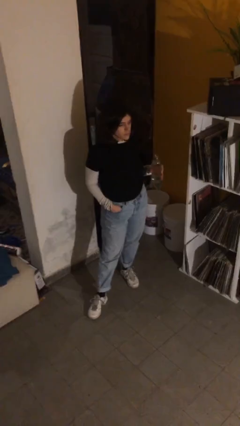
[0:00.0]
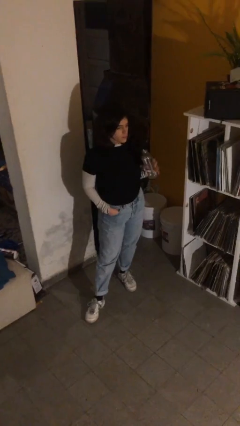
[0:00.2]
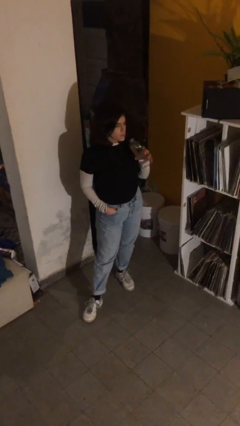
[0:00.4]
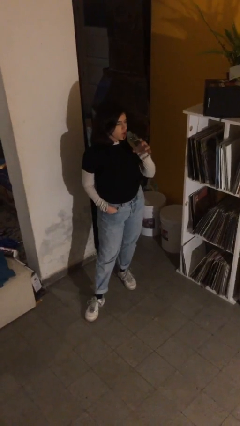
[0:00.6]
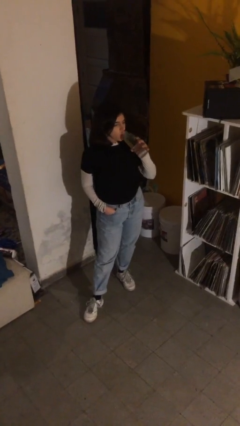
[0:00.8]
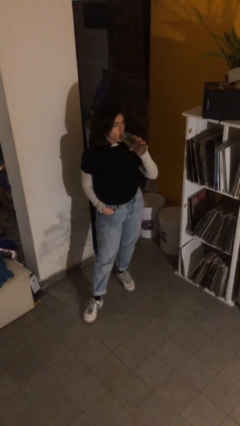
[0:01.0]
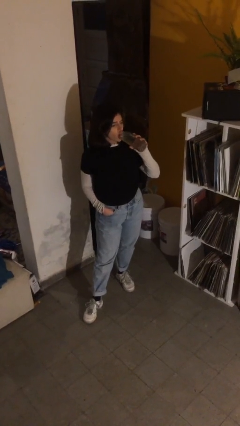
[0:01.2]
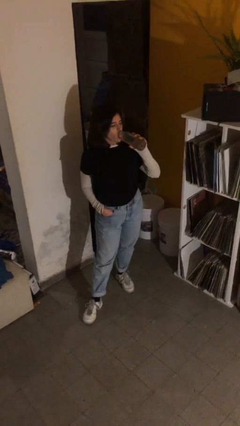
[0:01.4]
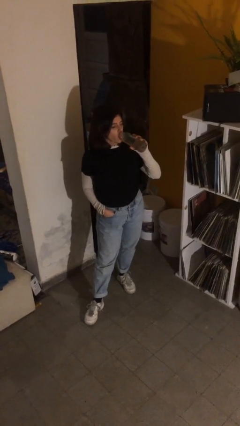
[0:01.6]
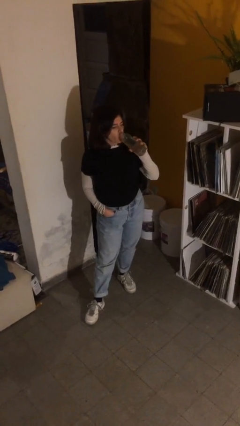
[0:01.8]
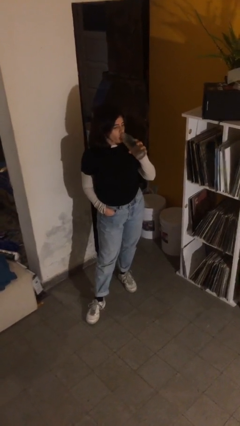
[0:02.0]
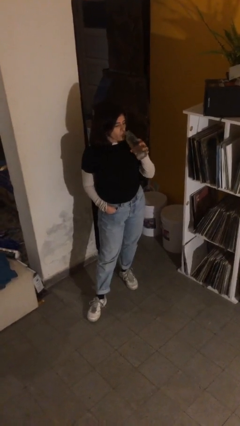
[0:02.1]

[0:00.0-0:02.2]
person drinks from bottle

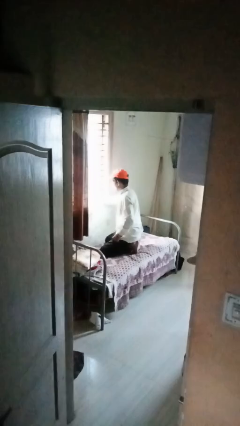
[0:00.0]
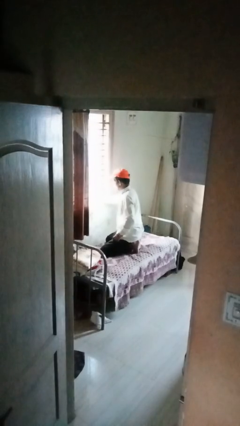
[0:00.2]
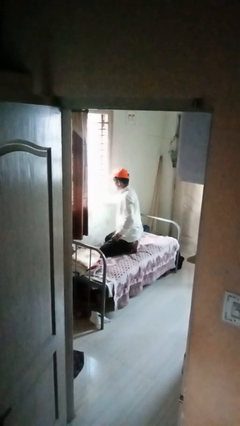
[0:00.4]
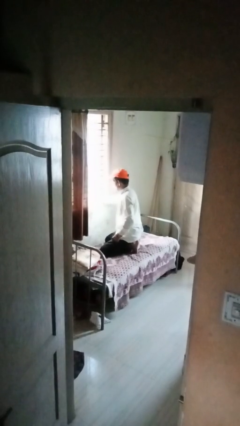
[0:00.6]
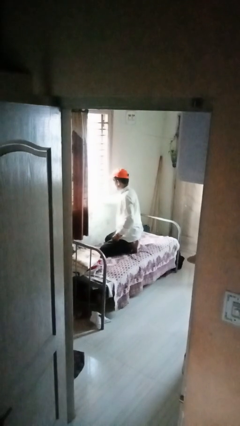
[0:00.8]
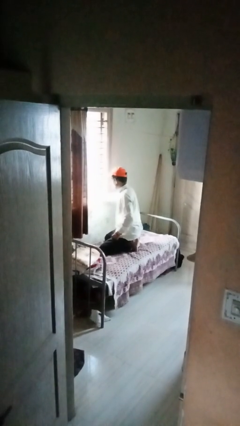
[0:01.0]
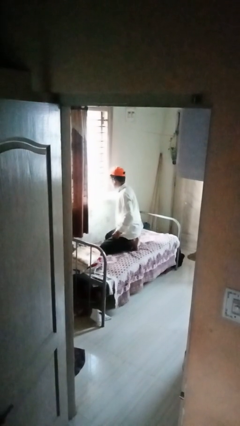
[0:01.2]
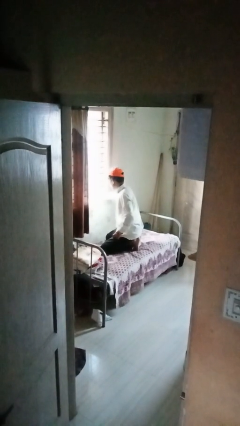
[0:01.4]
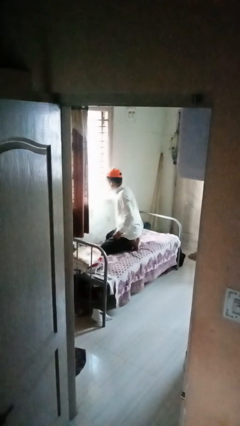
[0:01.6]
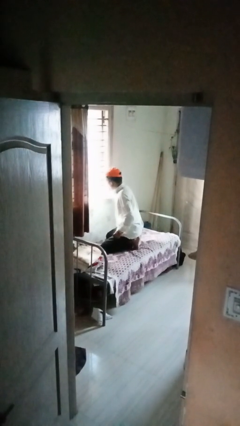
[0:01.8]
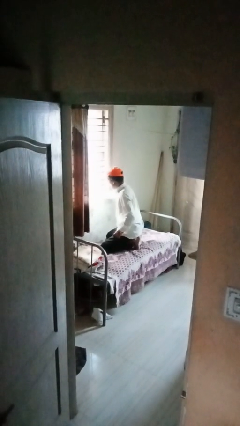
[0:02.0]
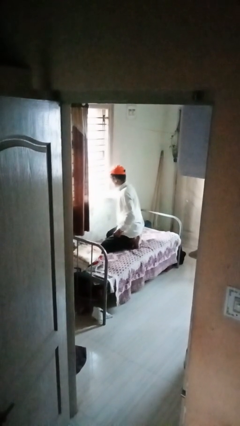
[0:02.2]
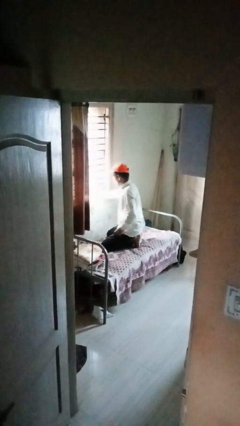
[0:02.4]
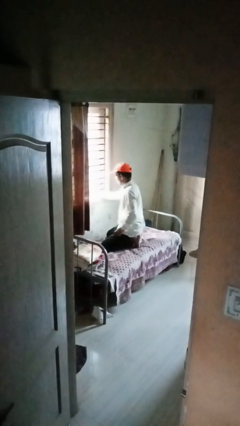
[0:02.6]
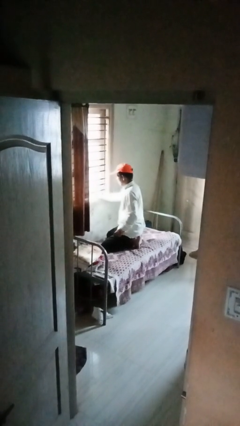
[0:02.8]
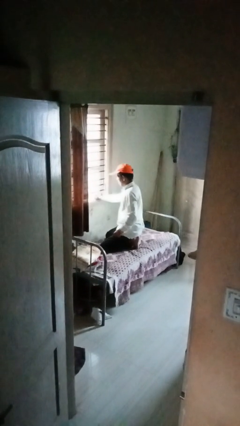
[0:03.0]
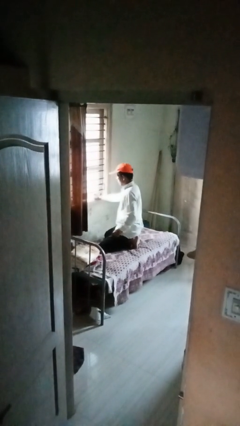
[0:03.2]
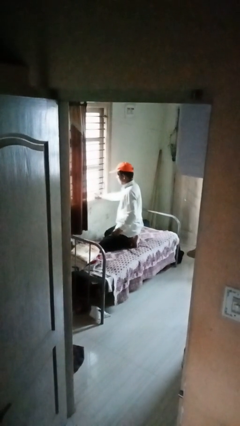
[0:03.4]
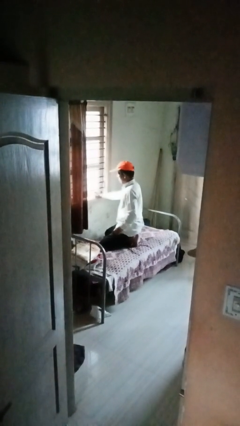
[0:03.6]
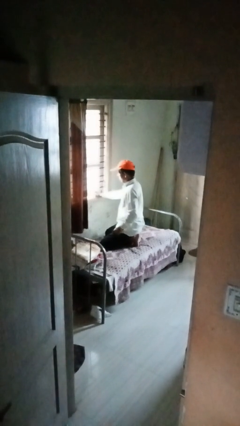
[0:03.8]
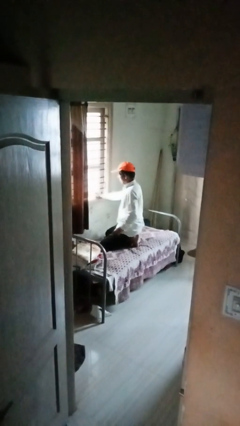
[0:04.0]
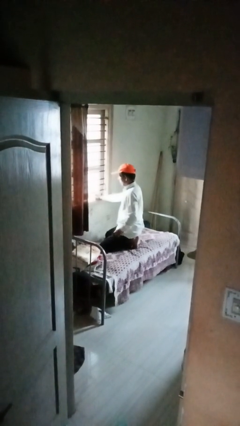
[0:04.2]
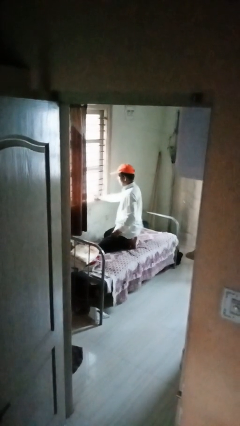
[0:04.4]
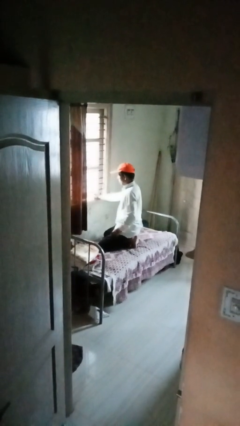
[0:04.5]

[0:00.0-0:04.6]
person closes home window

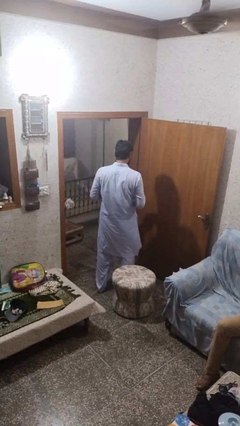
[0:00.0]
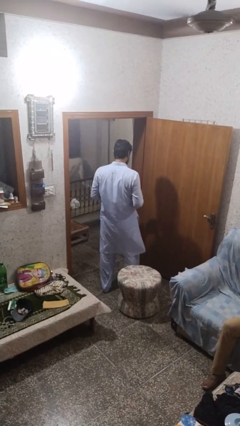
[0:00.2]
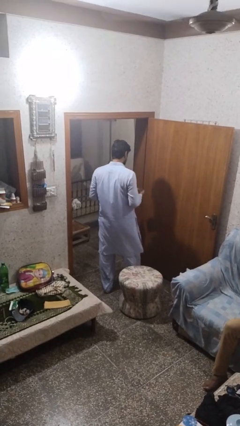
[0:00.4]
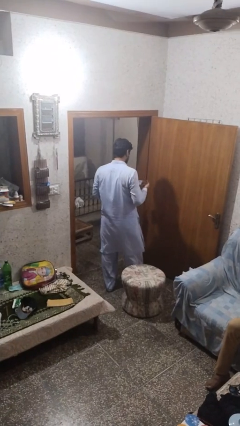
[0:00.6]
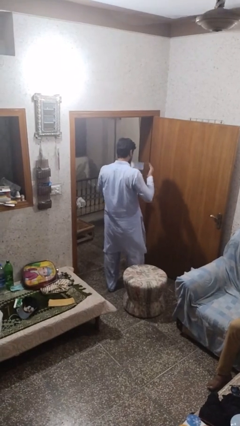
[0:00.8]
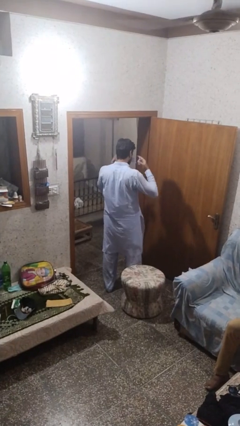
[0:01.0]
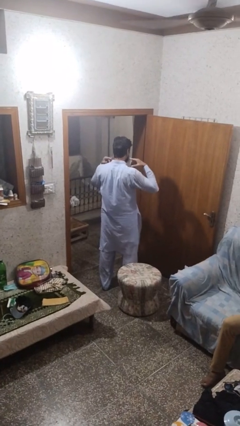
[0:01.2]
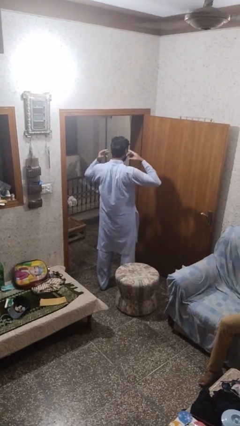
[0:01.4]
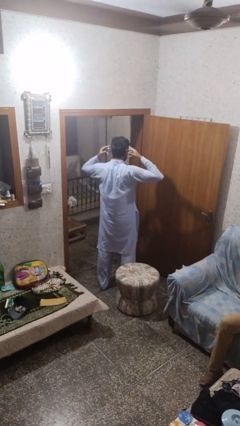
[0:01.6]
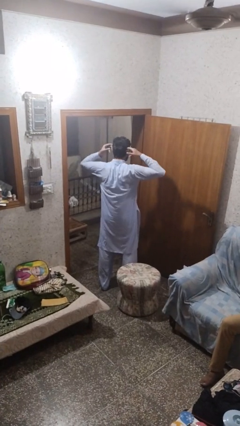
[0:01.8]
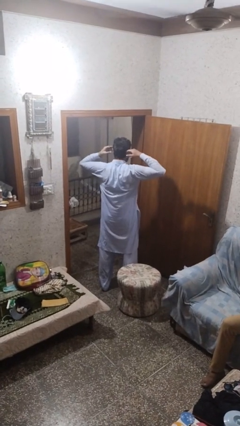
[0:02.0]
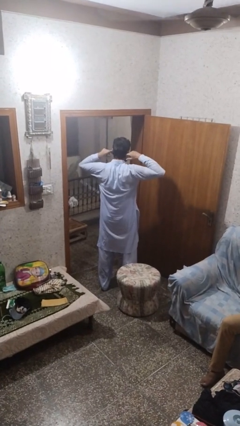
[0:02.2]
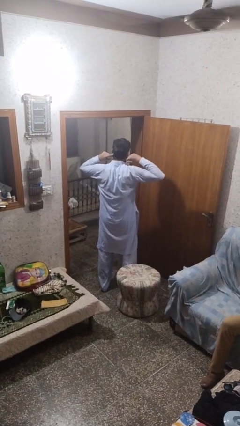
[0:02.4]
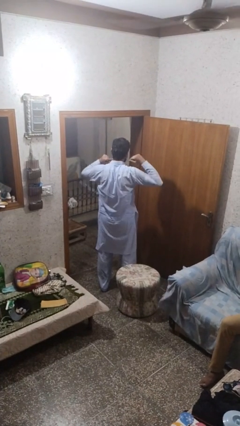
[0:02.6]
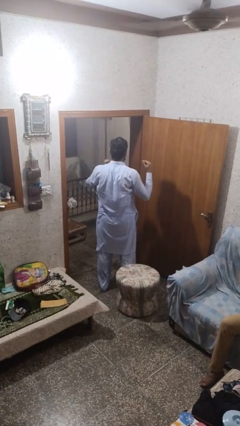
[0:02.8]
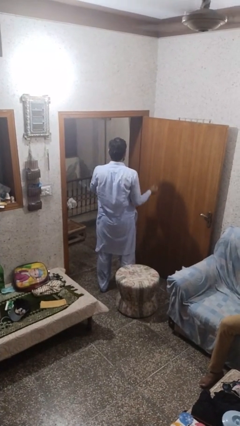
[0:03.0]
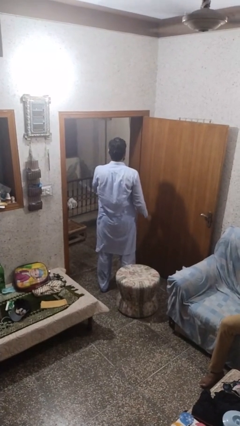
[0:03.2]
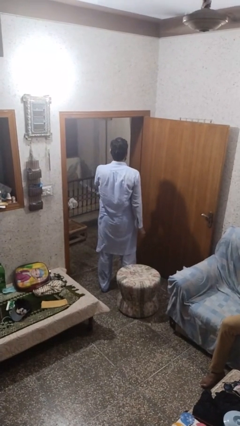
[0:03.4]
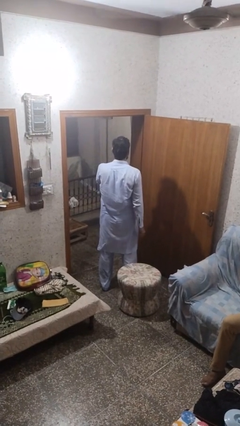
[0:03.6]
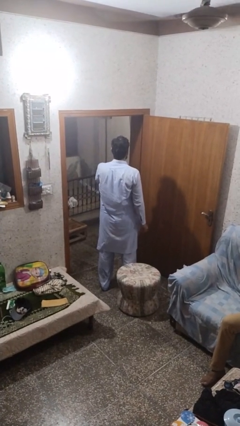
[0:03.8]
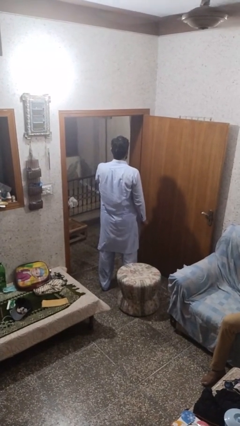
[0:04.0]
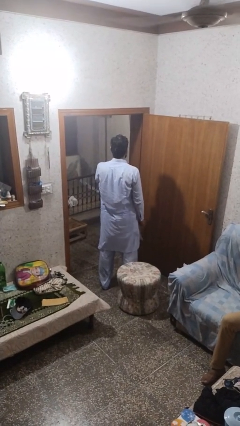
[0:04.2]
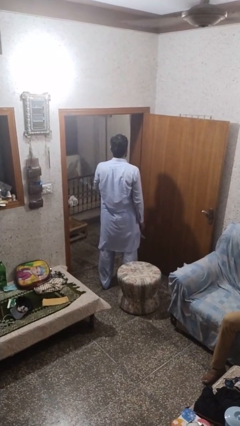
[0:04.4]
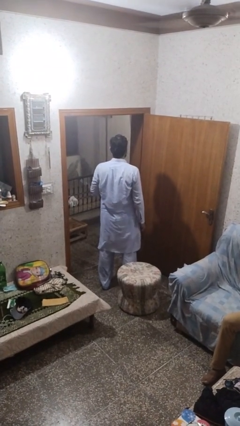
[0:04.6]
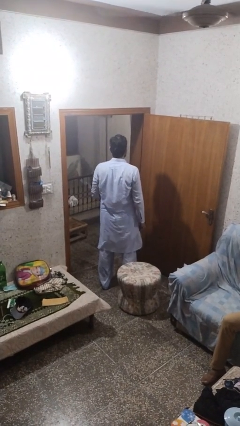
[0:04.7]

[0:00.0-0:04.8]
person puts on facemask

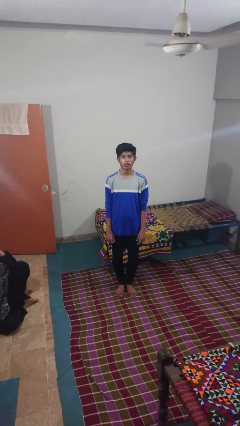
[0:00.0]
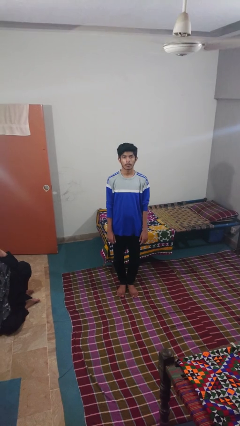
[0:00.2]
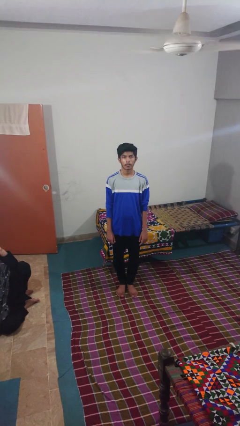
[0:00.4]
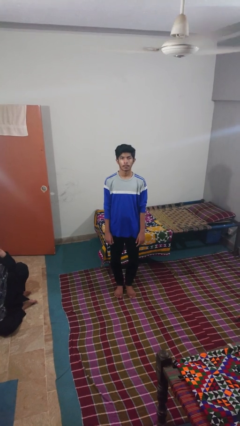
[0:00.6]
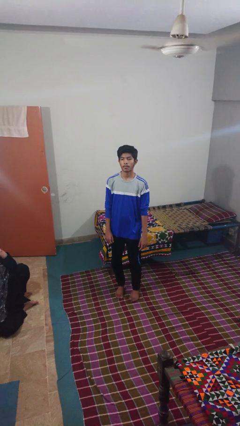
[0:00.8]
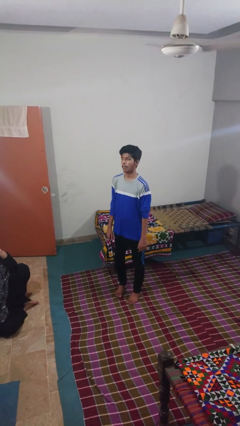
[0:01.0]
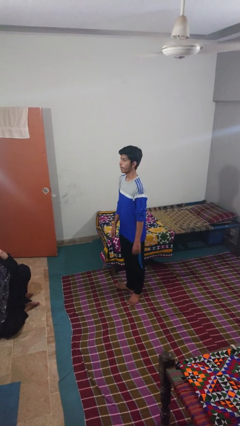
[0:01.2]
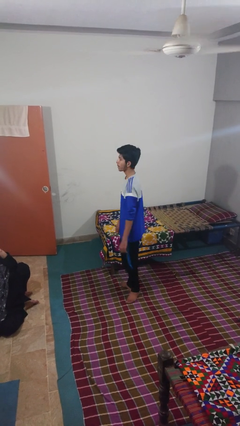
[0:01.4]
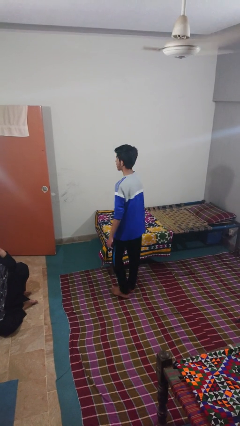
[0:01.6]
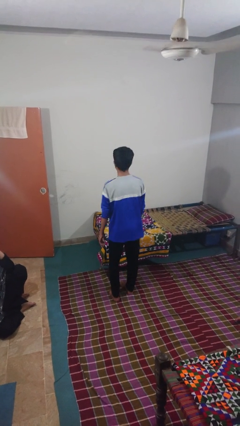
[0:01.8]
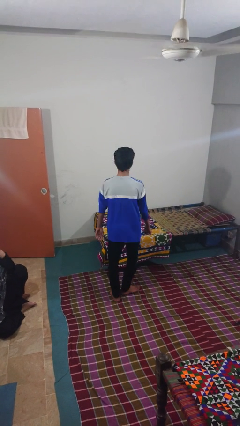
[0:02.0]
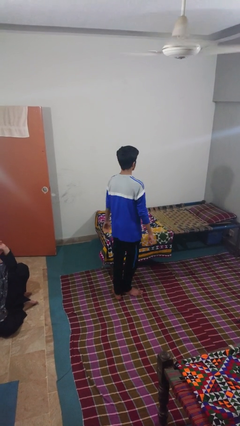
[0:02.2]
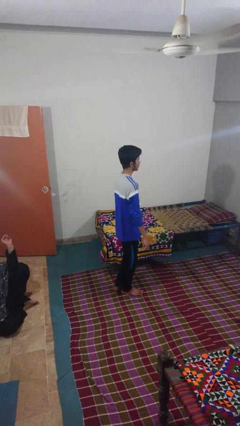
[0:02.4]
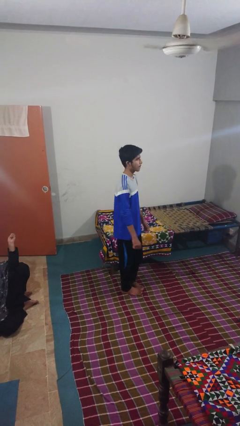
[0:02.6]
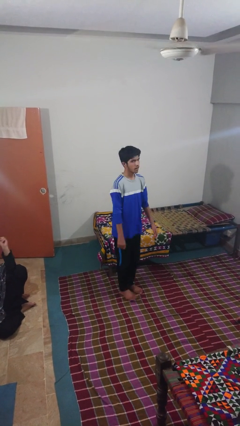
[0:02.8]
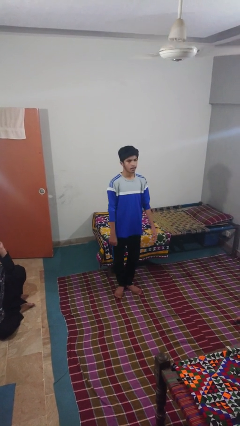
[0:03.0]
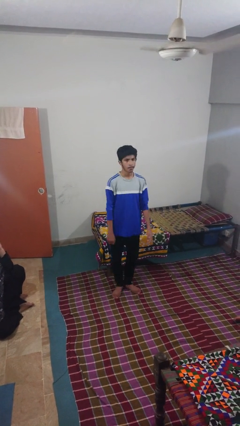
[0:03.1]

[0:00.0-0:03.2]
person twirls

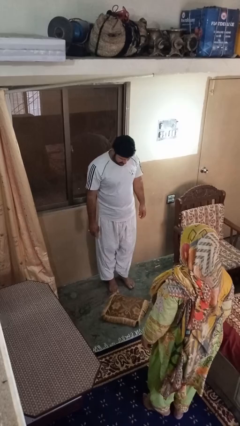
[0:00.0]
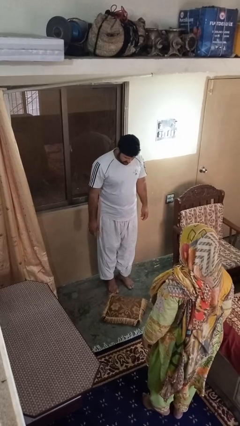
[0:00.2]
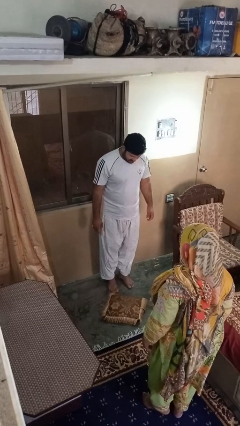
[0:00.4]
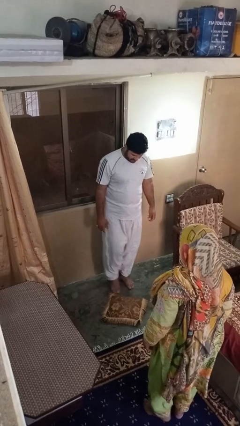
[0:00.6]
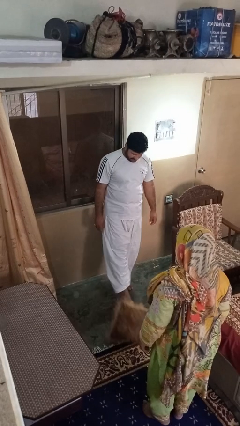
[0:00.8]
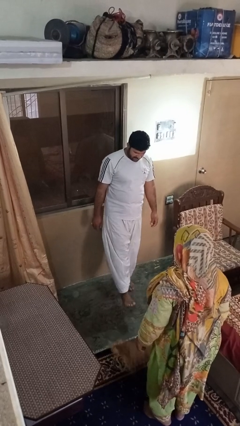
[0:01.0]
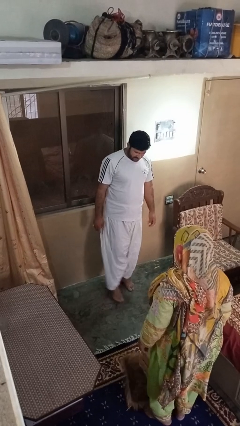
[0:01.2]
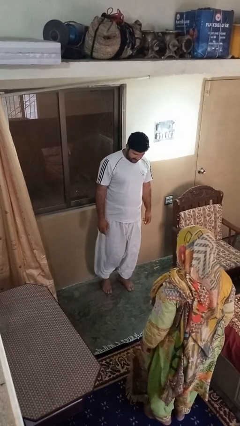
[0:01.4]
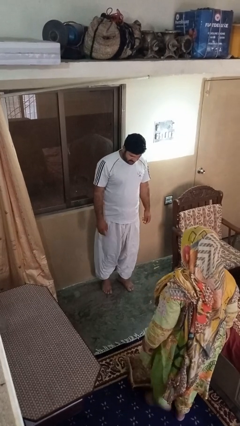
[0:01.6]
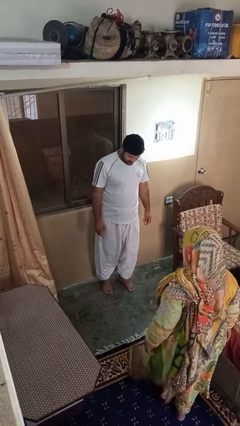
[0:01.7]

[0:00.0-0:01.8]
person kicks object to person

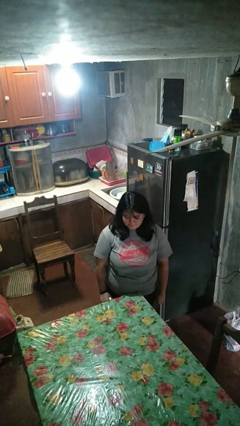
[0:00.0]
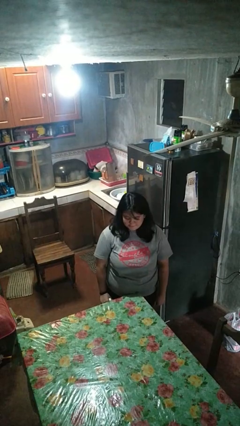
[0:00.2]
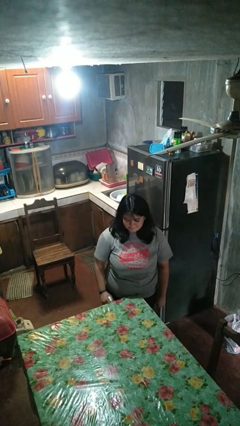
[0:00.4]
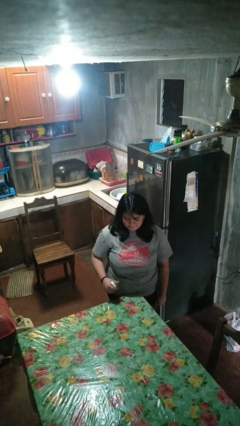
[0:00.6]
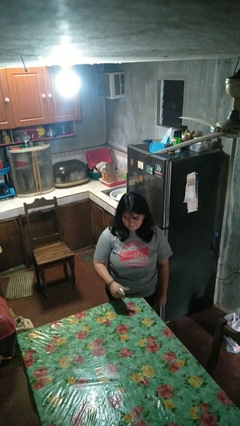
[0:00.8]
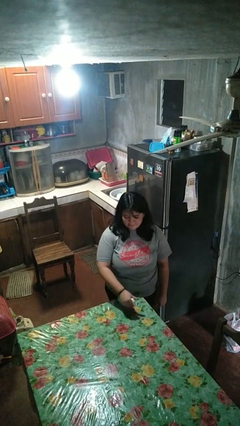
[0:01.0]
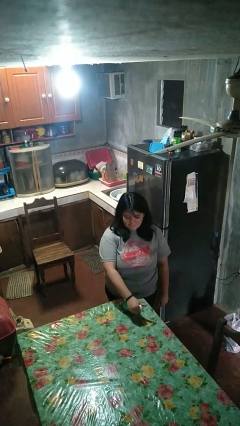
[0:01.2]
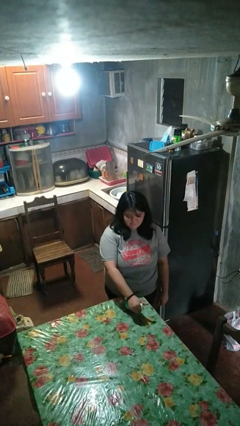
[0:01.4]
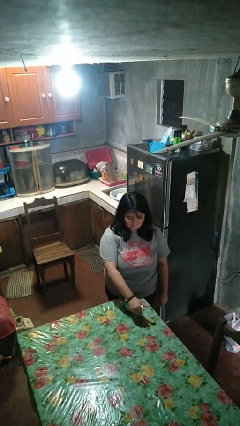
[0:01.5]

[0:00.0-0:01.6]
person sprays from bottle
